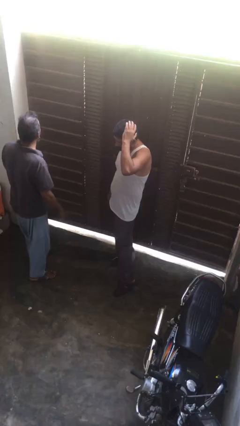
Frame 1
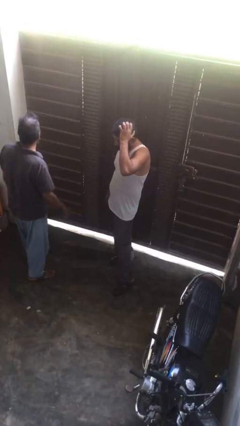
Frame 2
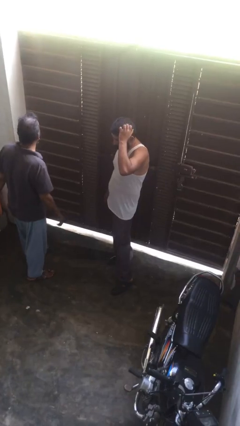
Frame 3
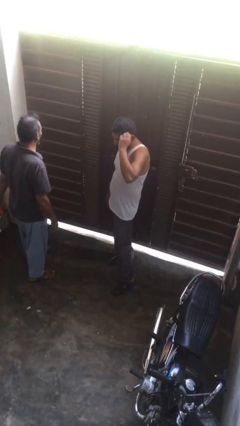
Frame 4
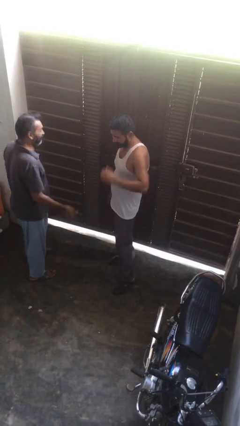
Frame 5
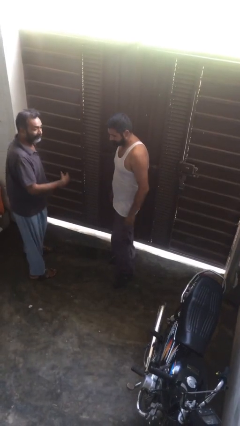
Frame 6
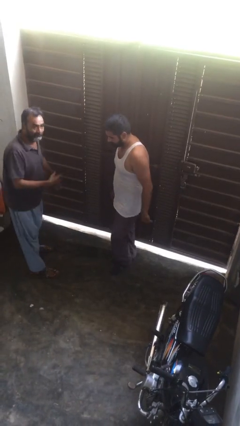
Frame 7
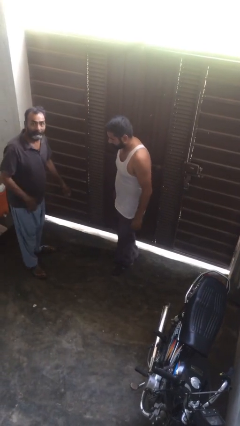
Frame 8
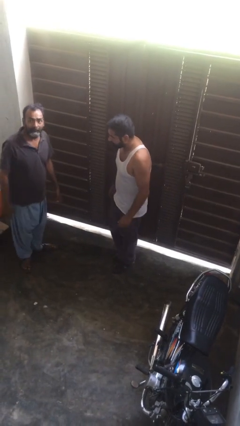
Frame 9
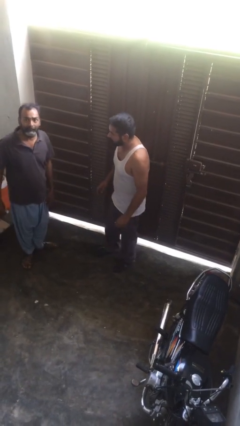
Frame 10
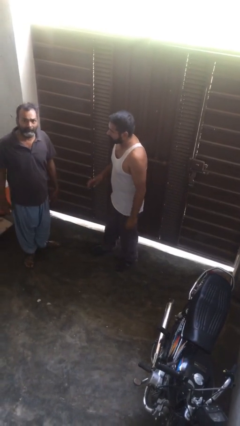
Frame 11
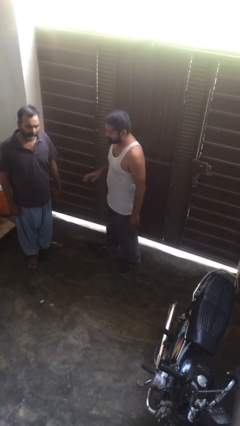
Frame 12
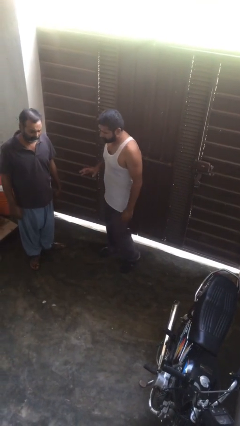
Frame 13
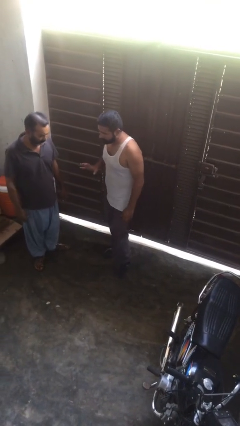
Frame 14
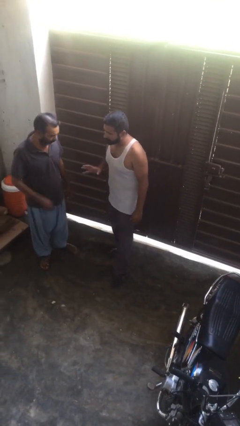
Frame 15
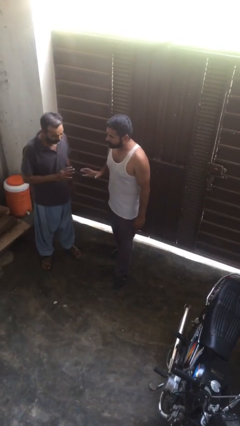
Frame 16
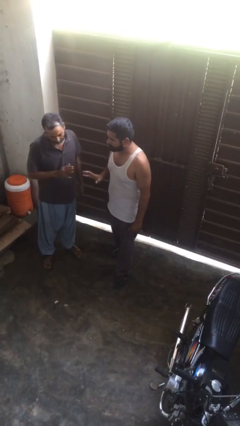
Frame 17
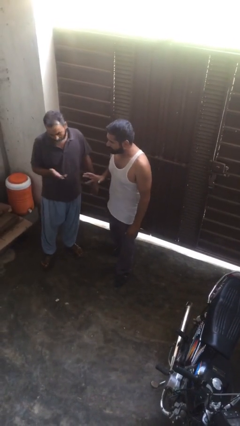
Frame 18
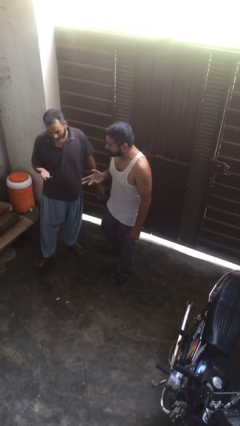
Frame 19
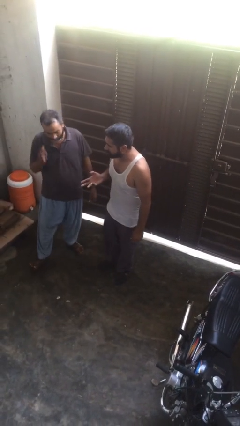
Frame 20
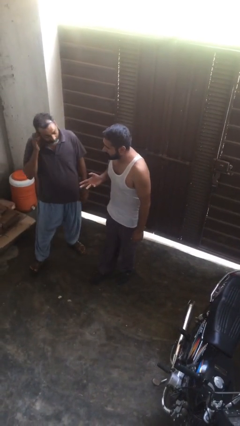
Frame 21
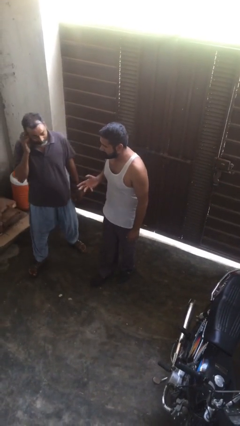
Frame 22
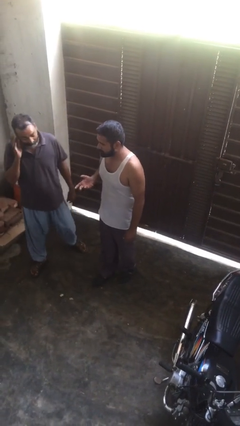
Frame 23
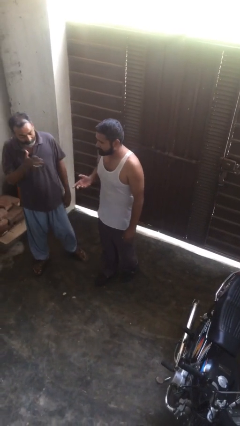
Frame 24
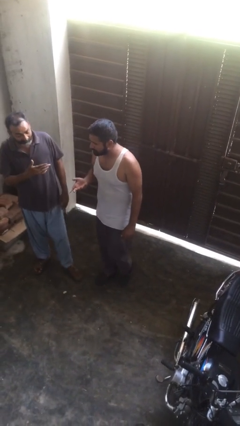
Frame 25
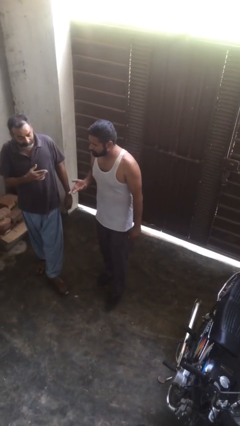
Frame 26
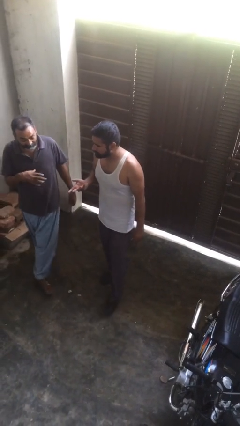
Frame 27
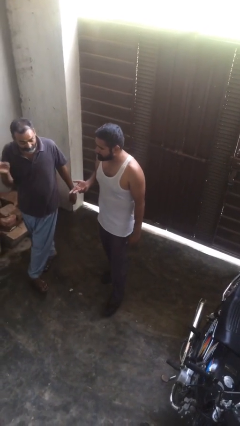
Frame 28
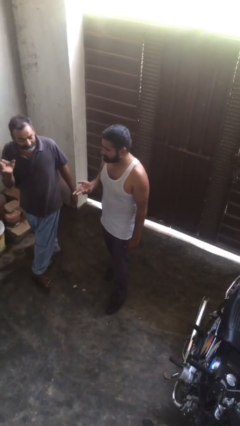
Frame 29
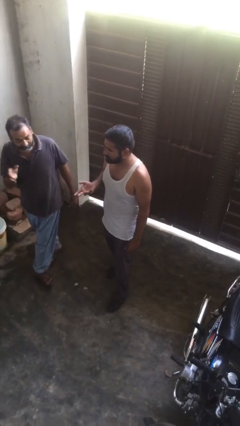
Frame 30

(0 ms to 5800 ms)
person talks to person

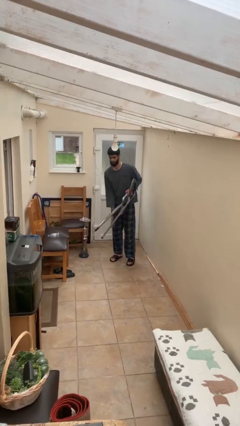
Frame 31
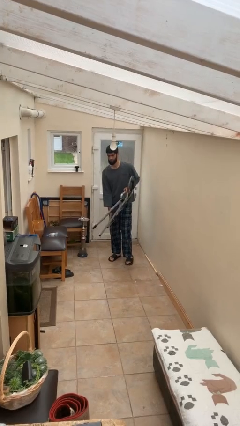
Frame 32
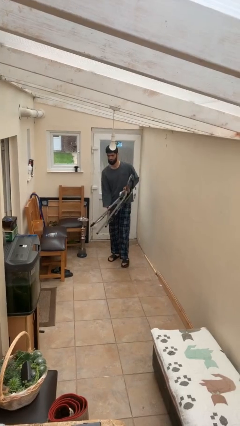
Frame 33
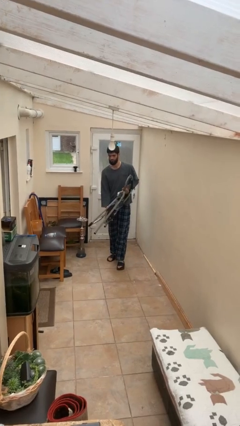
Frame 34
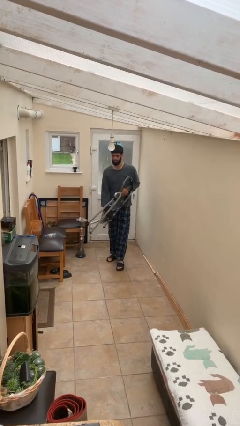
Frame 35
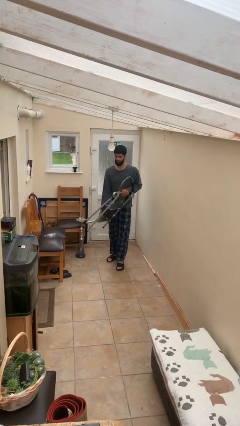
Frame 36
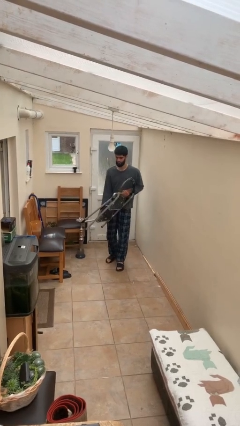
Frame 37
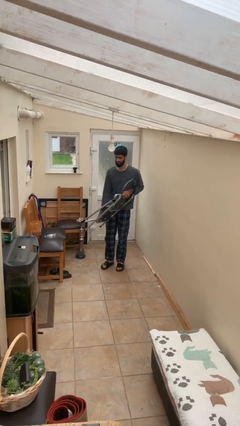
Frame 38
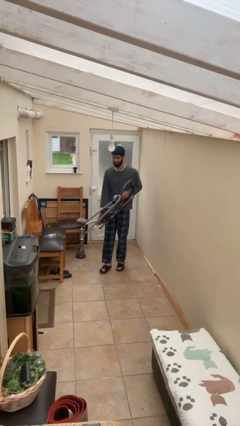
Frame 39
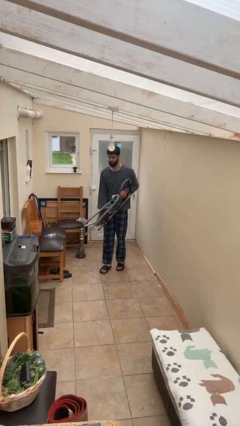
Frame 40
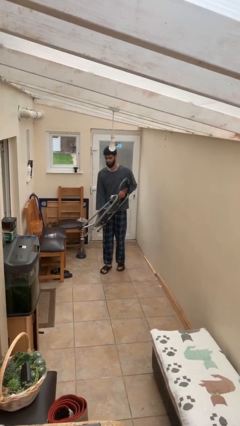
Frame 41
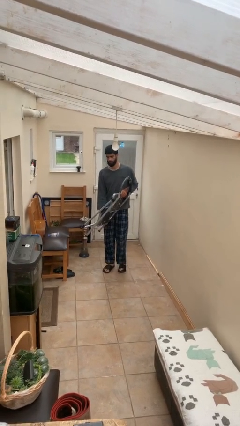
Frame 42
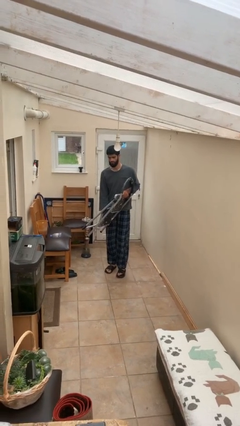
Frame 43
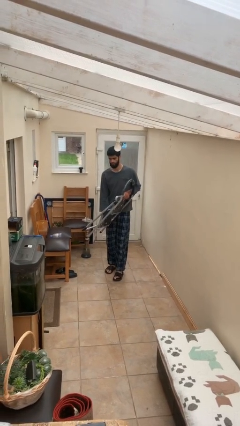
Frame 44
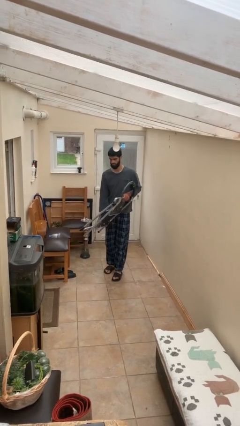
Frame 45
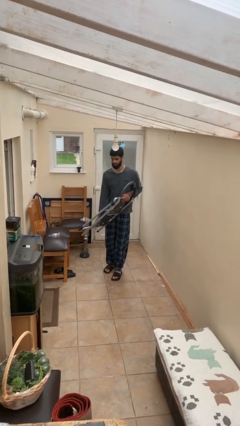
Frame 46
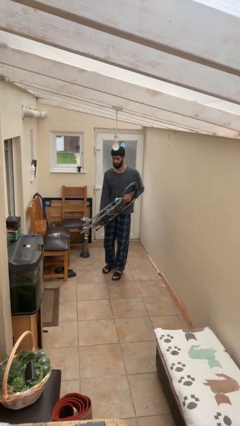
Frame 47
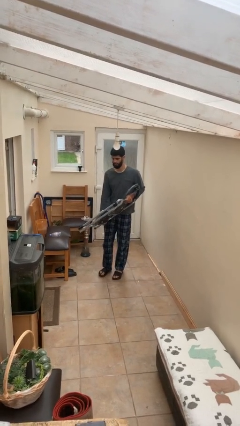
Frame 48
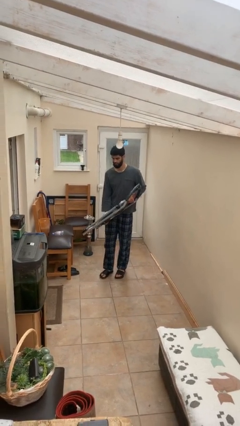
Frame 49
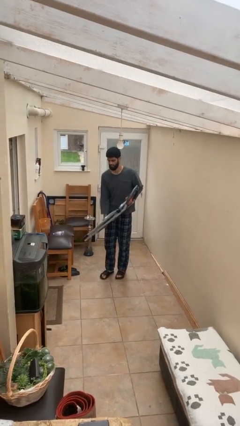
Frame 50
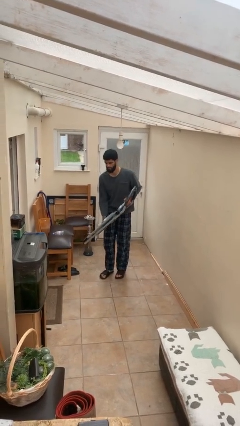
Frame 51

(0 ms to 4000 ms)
person carries heavy object

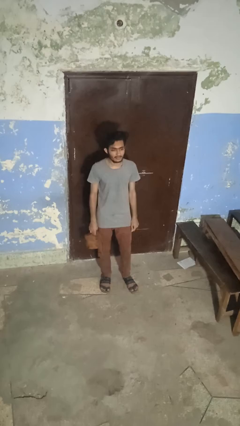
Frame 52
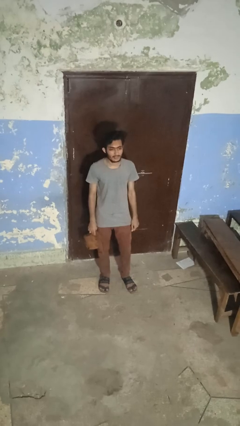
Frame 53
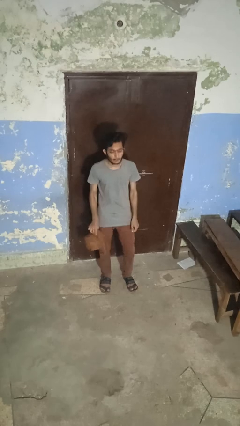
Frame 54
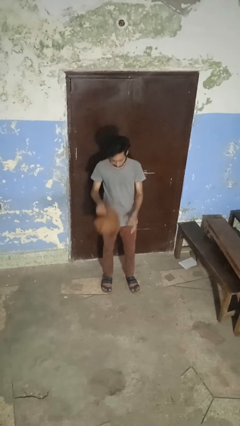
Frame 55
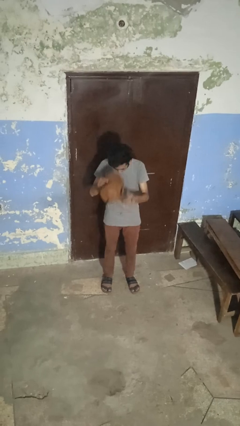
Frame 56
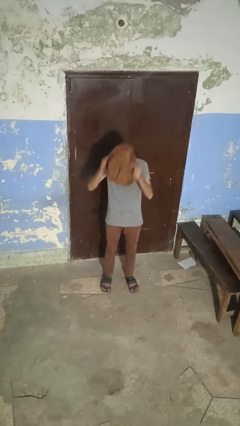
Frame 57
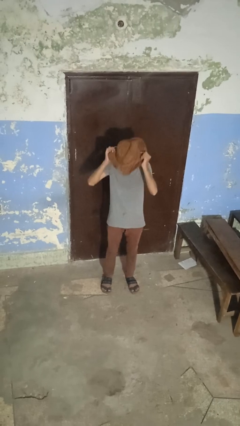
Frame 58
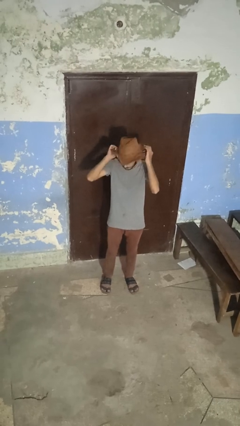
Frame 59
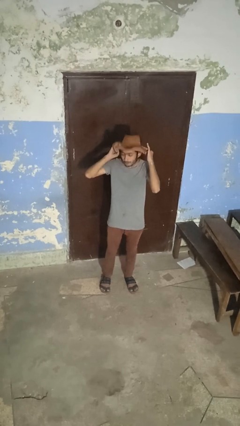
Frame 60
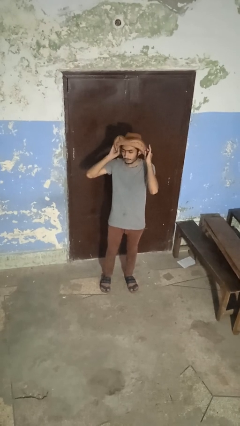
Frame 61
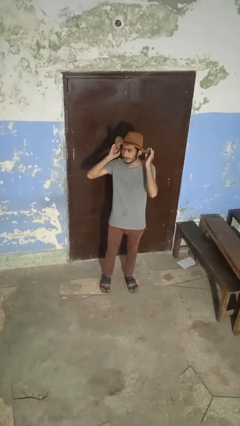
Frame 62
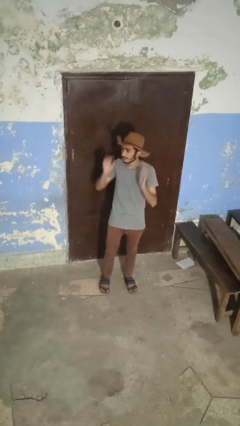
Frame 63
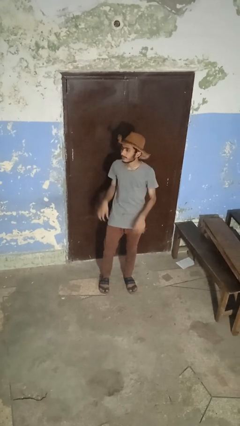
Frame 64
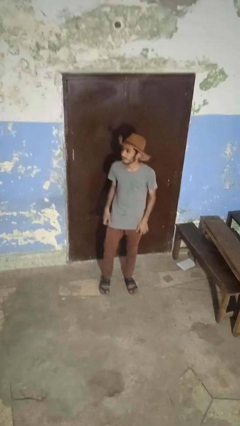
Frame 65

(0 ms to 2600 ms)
person puts on hat

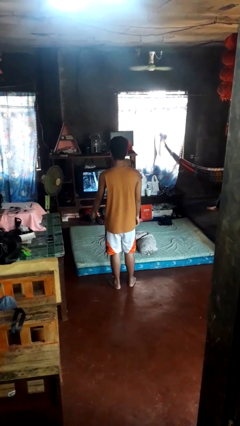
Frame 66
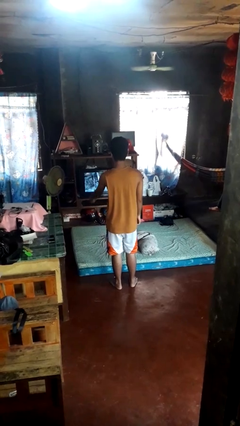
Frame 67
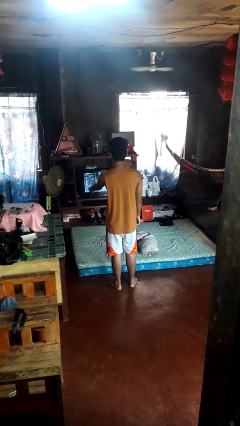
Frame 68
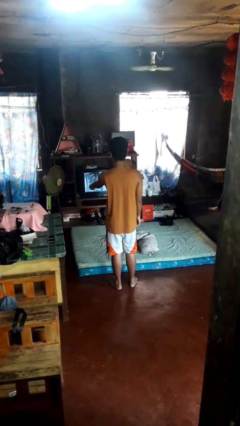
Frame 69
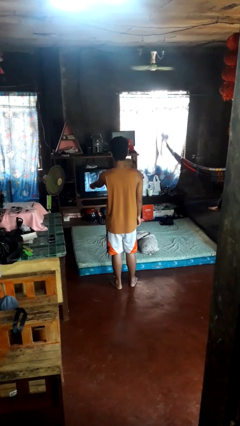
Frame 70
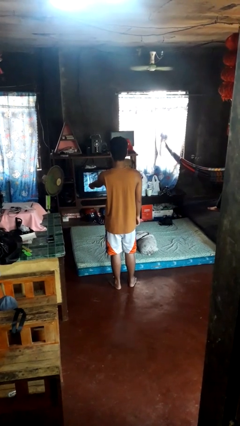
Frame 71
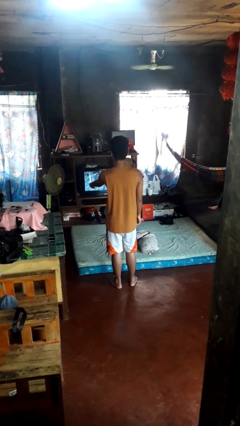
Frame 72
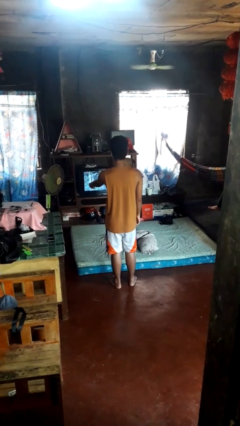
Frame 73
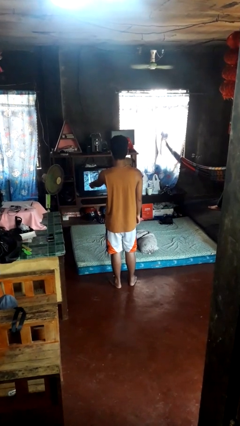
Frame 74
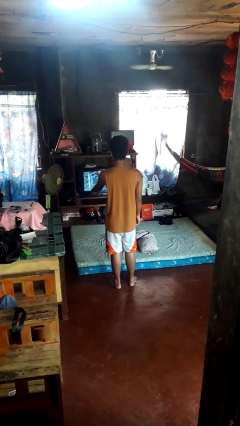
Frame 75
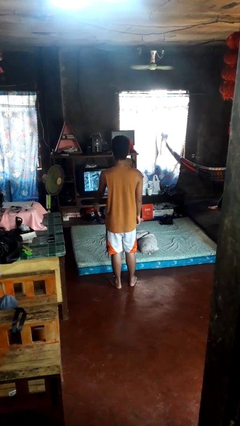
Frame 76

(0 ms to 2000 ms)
person uses television remote

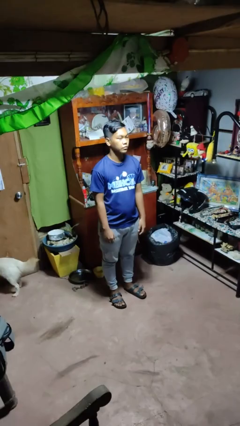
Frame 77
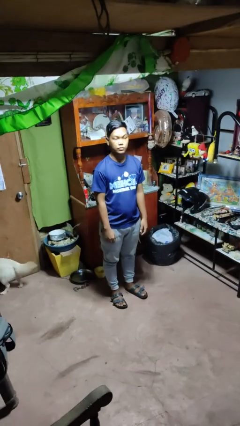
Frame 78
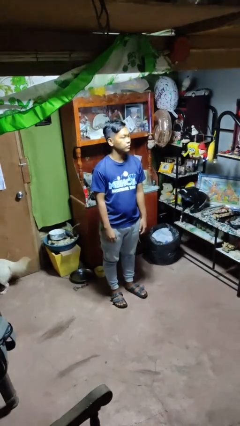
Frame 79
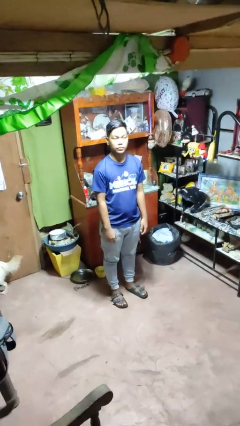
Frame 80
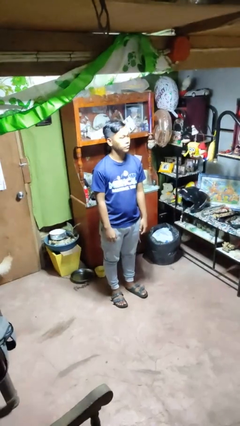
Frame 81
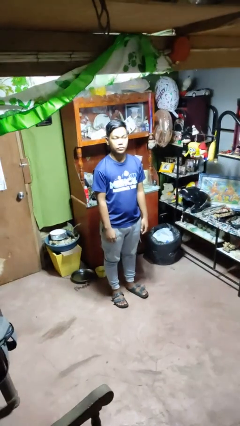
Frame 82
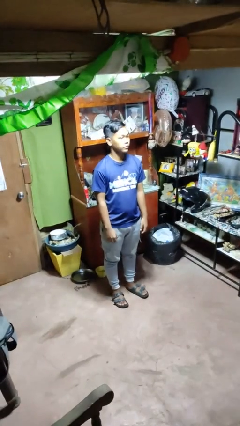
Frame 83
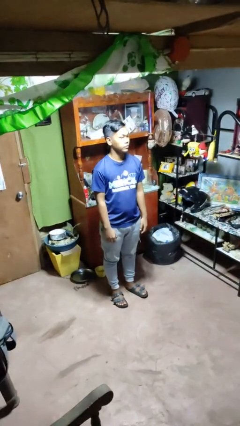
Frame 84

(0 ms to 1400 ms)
person shakes head

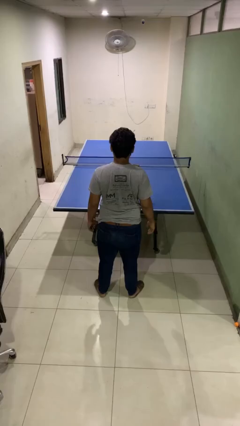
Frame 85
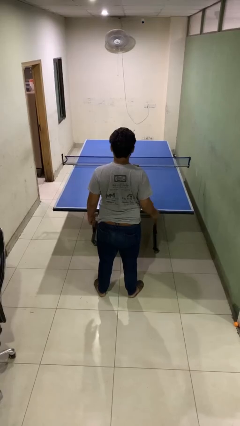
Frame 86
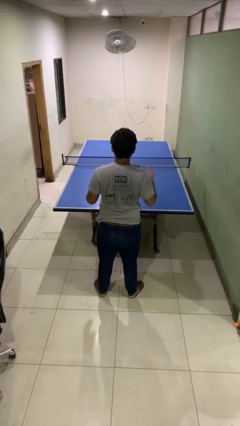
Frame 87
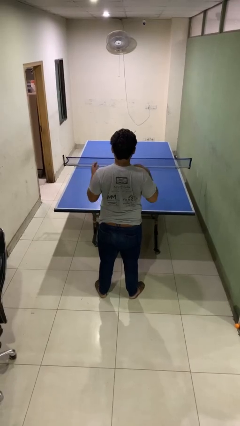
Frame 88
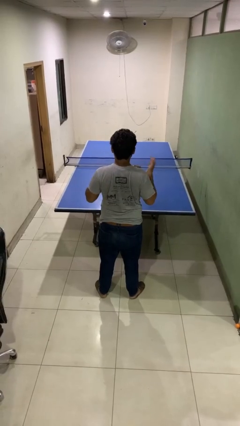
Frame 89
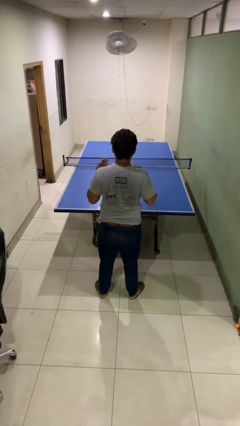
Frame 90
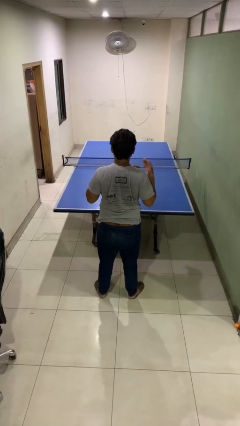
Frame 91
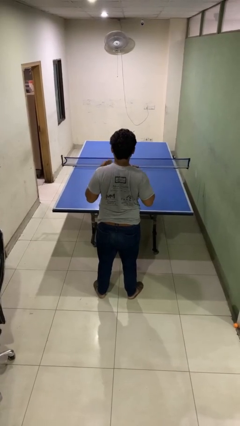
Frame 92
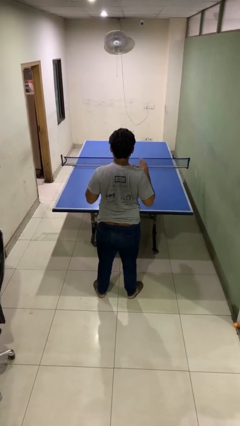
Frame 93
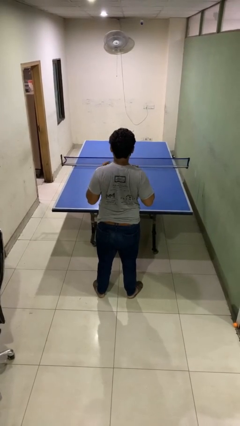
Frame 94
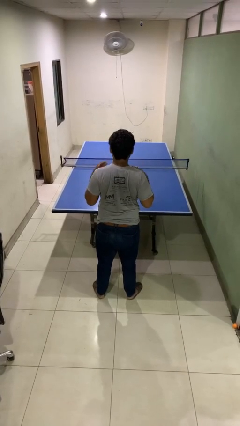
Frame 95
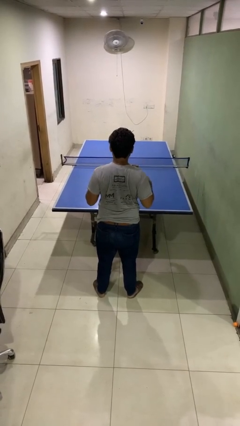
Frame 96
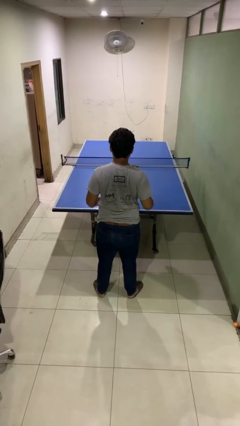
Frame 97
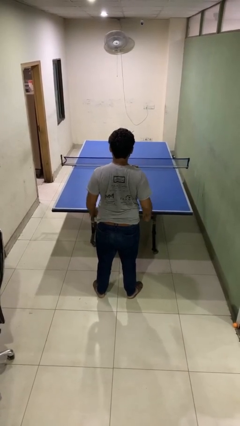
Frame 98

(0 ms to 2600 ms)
person drums on chest
